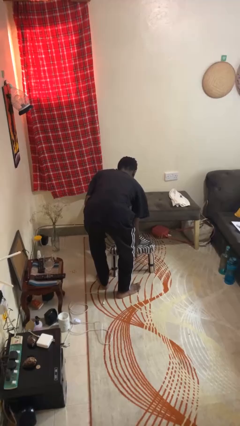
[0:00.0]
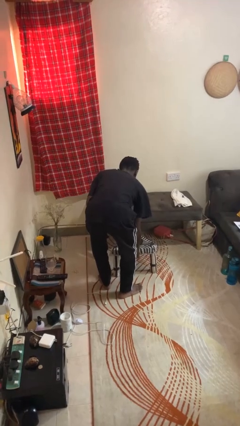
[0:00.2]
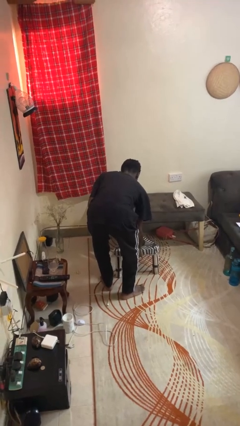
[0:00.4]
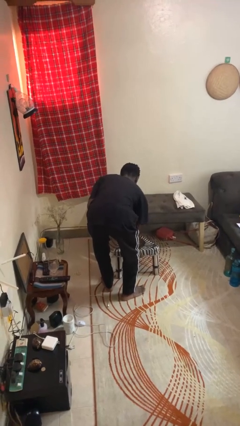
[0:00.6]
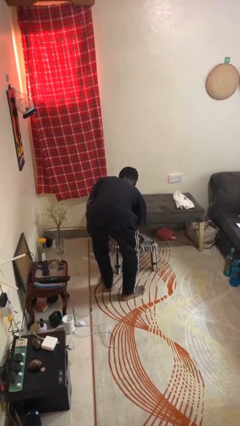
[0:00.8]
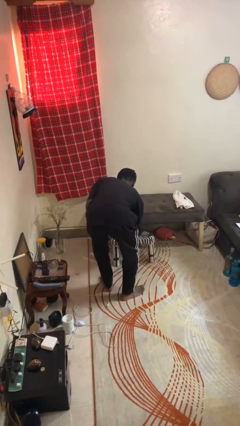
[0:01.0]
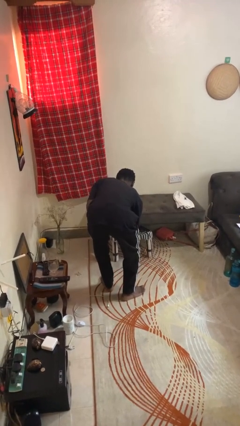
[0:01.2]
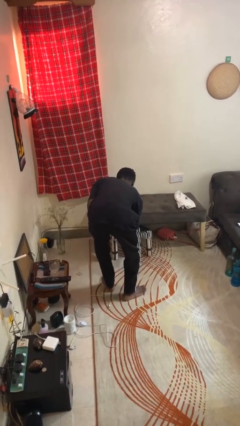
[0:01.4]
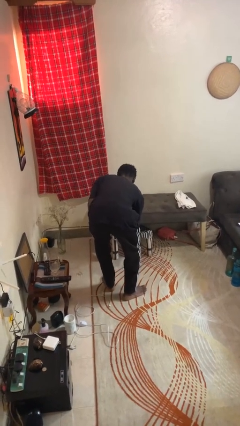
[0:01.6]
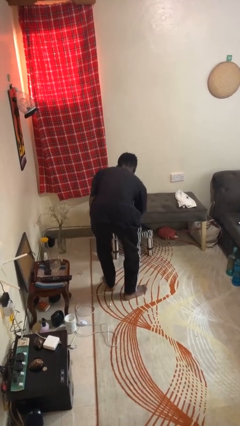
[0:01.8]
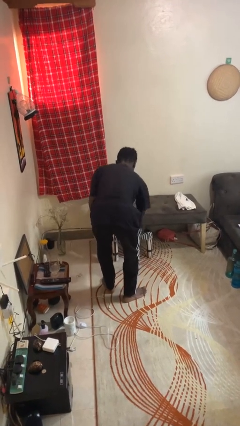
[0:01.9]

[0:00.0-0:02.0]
person pushes in chair

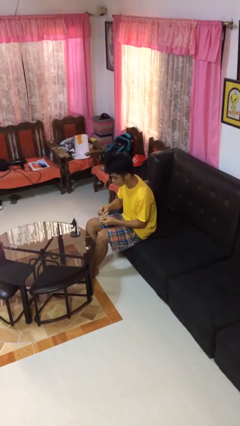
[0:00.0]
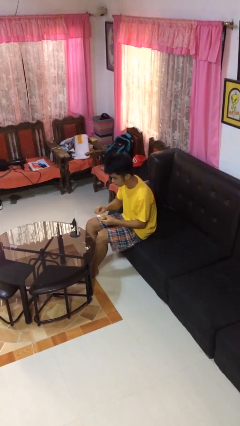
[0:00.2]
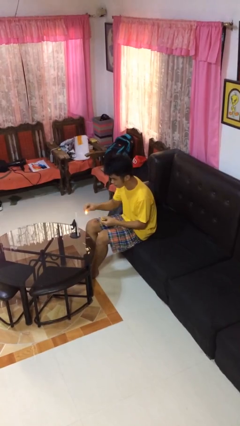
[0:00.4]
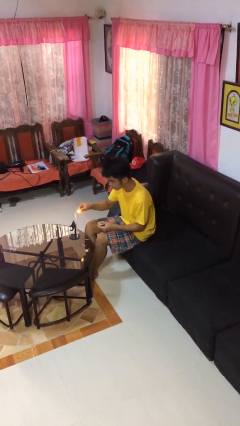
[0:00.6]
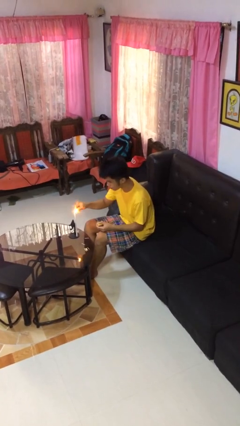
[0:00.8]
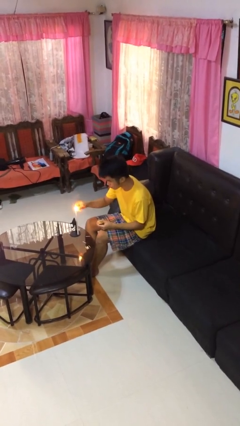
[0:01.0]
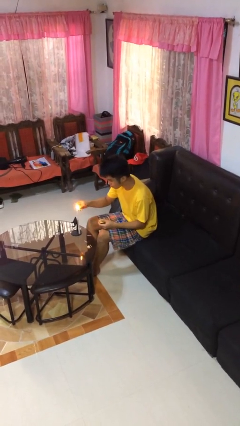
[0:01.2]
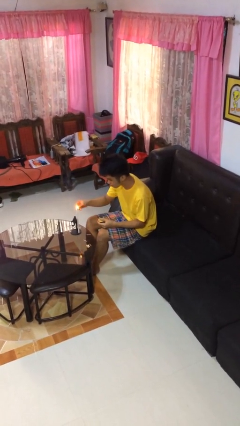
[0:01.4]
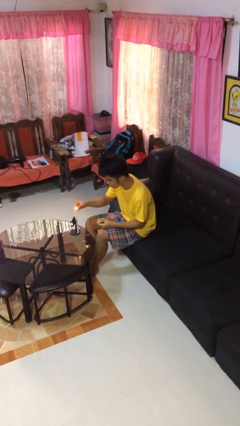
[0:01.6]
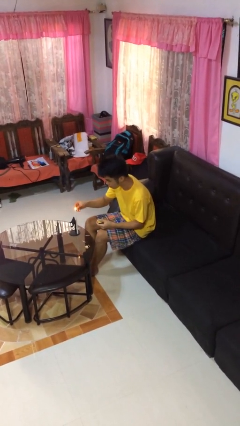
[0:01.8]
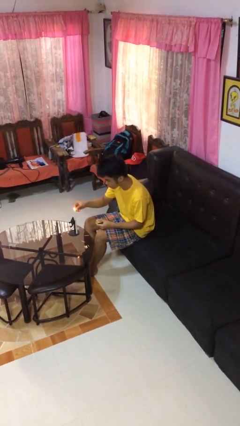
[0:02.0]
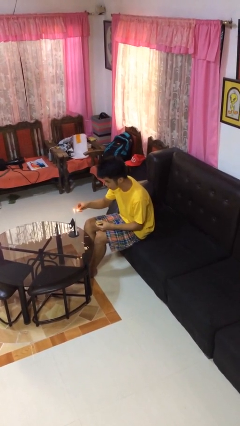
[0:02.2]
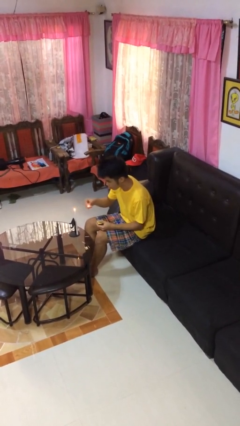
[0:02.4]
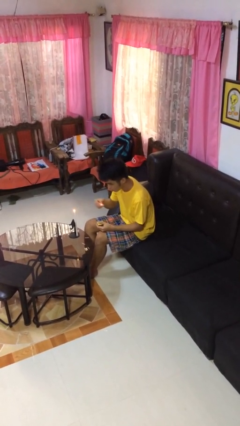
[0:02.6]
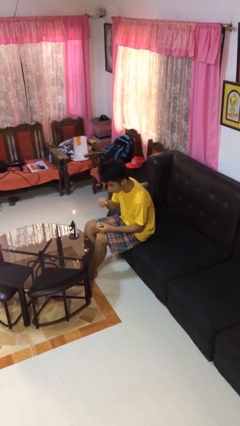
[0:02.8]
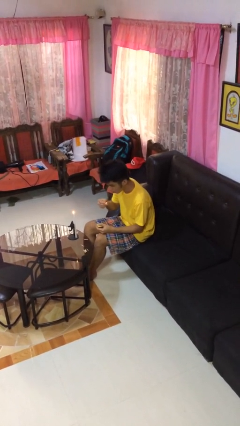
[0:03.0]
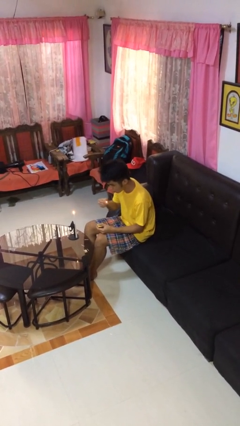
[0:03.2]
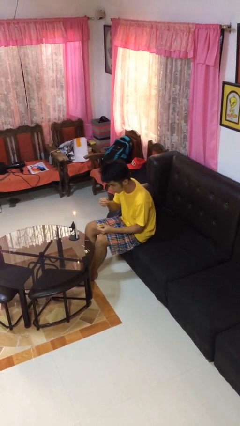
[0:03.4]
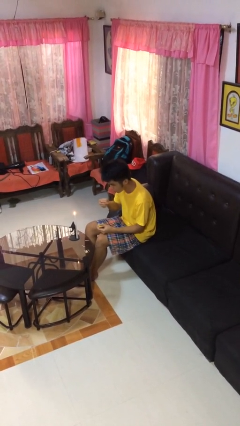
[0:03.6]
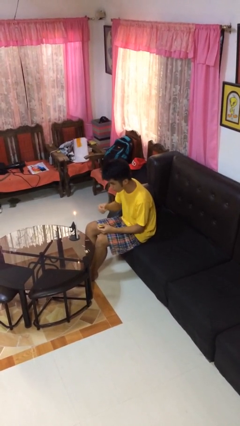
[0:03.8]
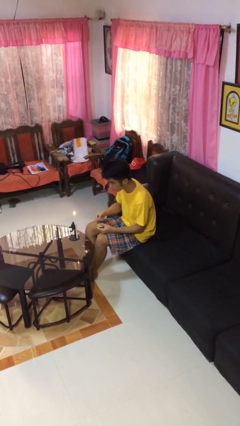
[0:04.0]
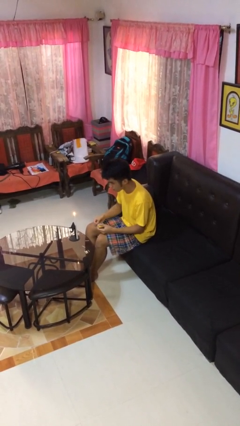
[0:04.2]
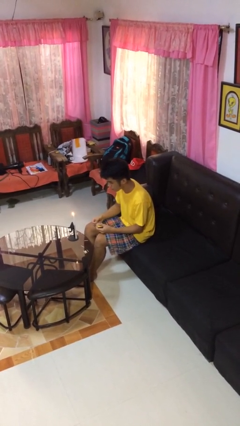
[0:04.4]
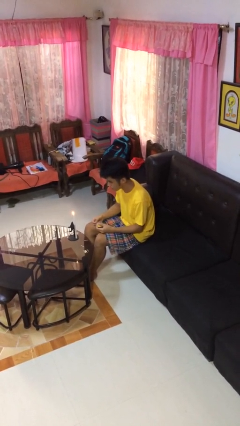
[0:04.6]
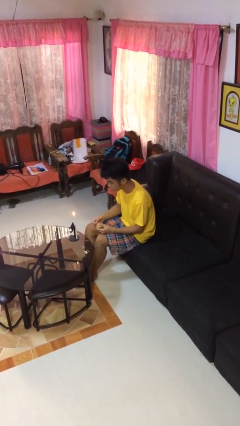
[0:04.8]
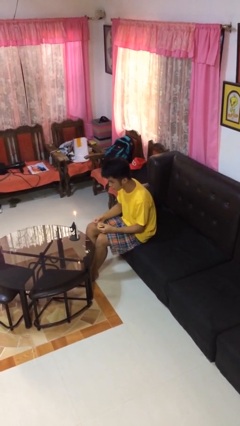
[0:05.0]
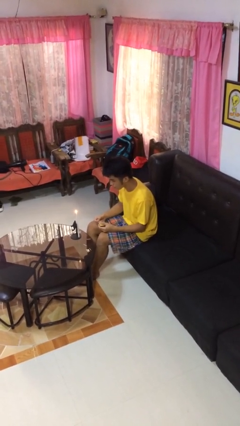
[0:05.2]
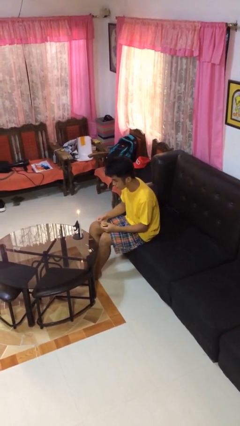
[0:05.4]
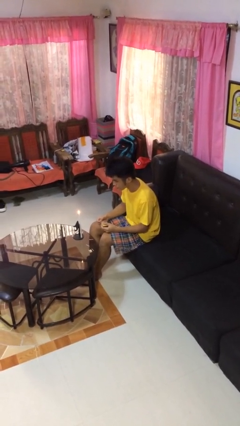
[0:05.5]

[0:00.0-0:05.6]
person lights candle

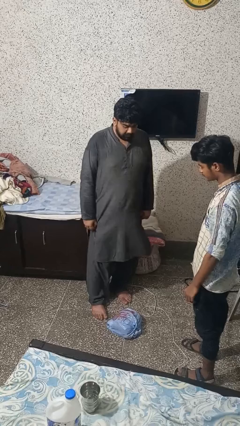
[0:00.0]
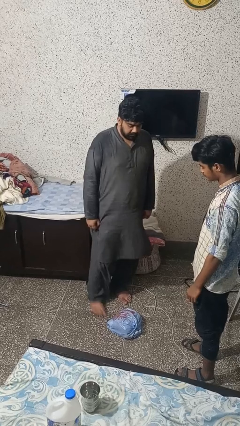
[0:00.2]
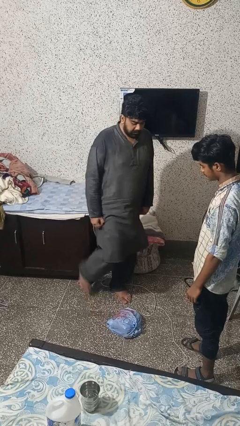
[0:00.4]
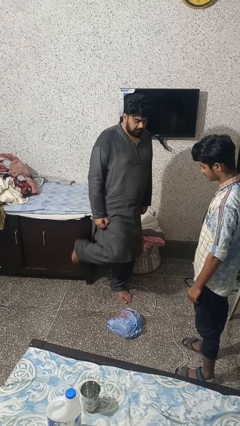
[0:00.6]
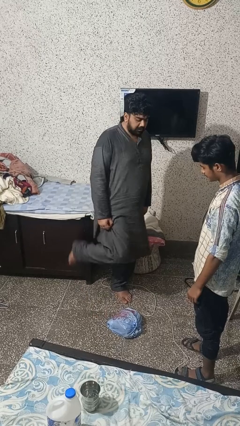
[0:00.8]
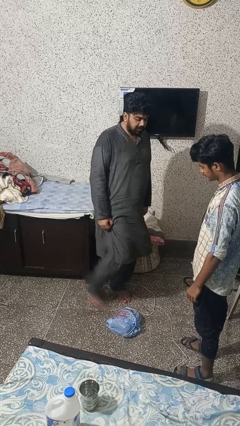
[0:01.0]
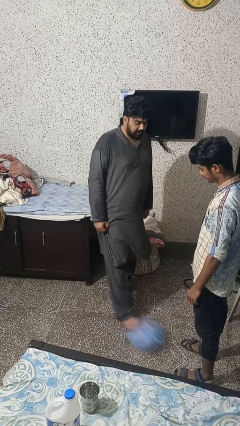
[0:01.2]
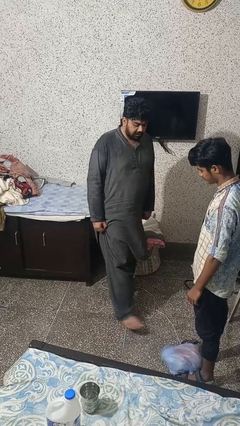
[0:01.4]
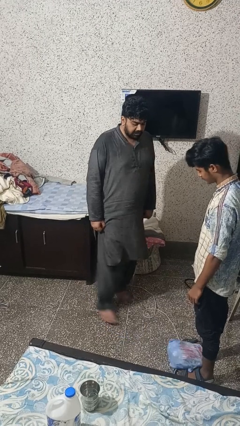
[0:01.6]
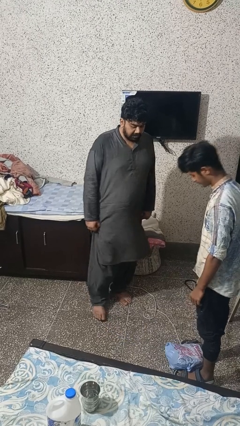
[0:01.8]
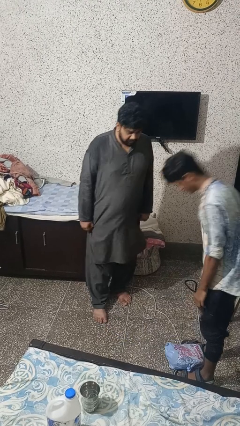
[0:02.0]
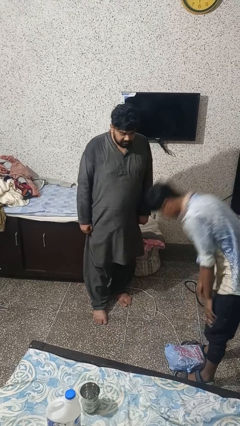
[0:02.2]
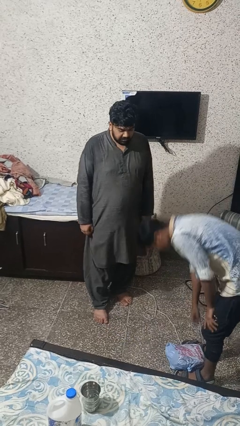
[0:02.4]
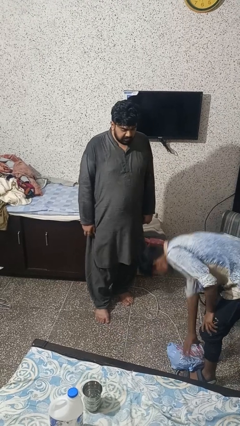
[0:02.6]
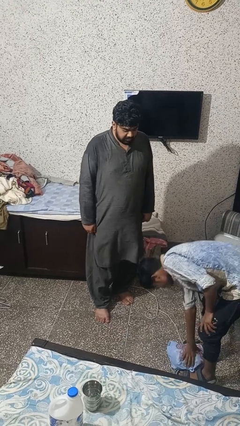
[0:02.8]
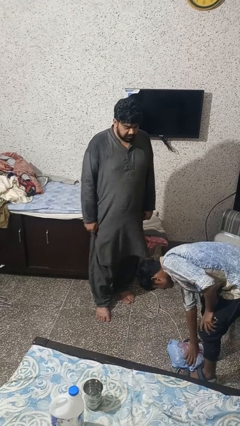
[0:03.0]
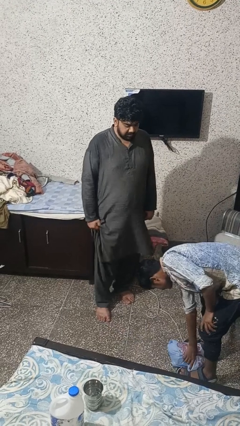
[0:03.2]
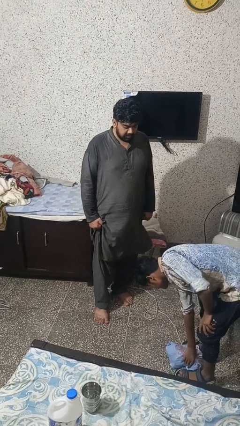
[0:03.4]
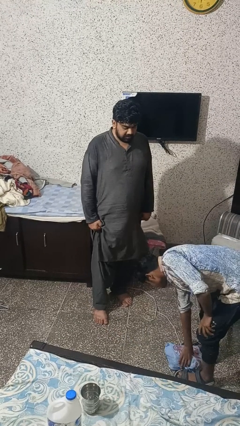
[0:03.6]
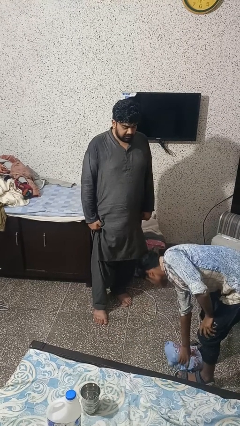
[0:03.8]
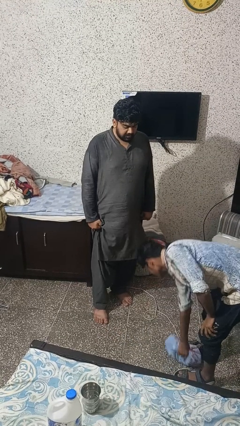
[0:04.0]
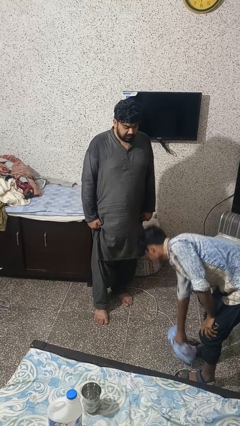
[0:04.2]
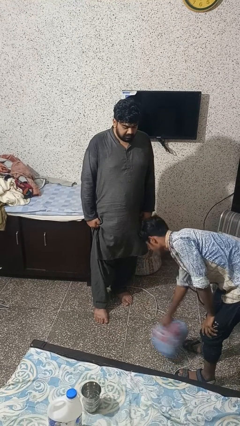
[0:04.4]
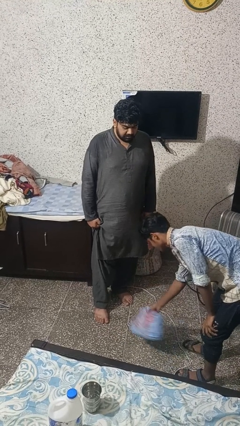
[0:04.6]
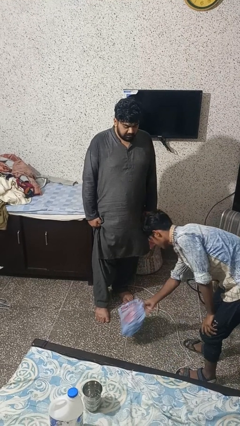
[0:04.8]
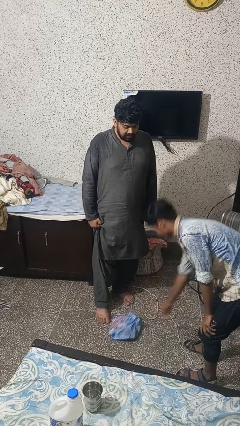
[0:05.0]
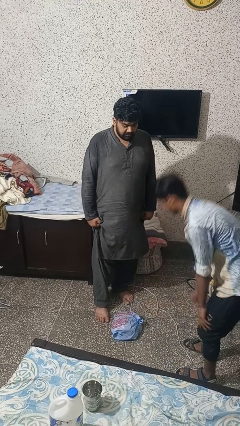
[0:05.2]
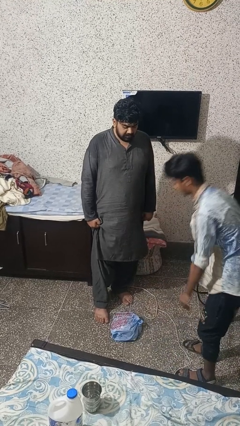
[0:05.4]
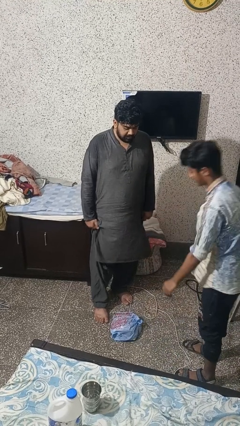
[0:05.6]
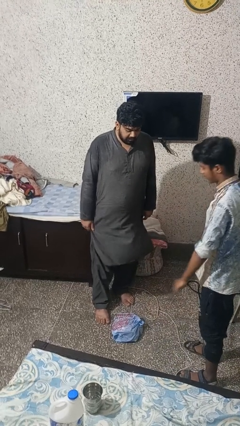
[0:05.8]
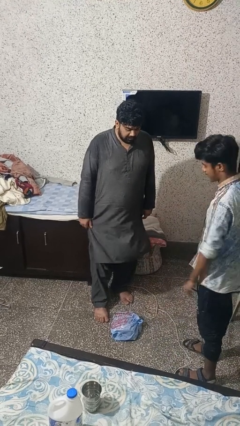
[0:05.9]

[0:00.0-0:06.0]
person kicks object to person

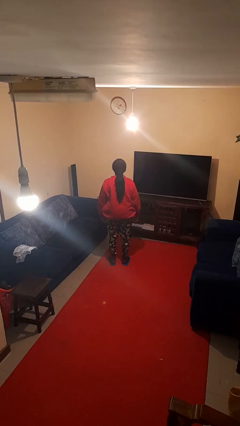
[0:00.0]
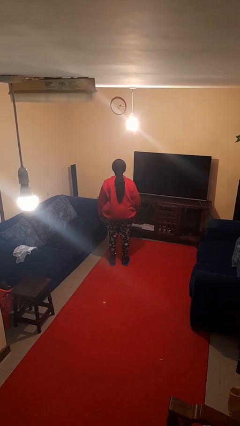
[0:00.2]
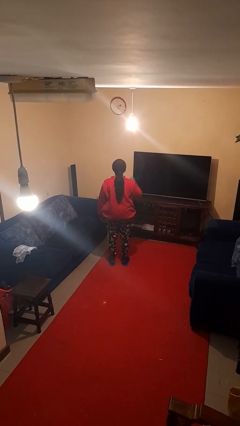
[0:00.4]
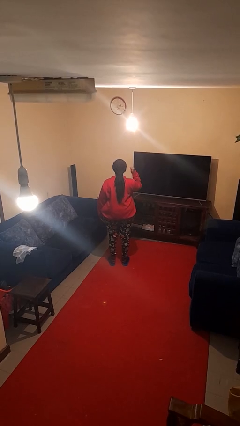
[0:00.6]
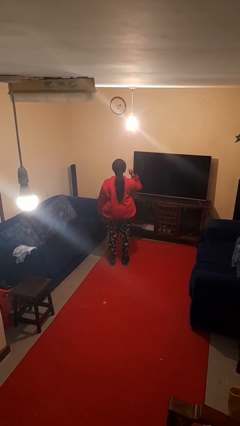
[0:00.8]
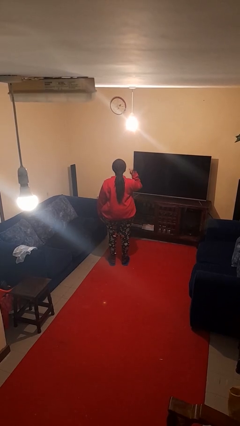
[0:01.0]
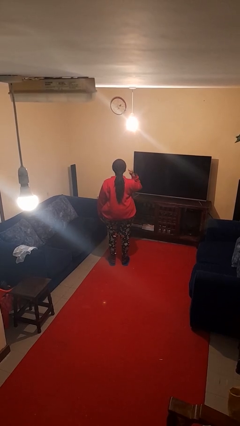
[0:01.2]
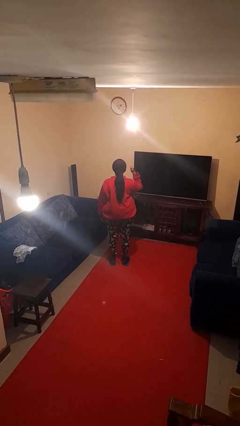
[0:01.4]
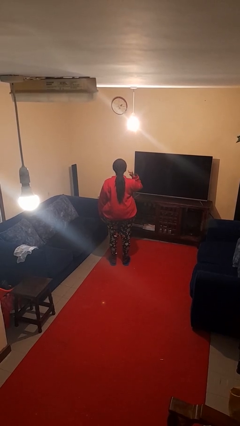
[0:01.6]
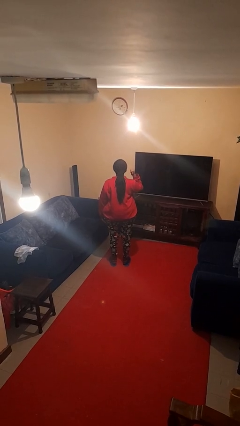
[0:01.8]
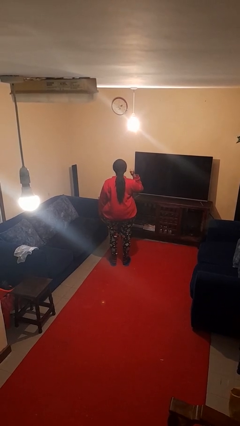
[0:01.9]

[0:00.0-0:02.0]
person gestures behind me

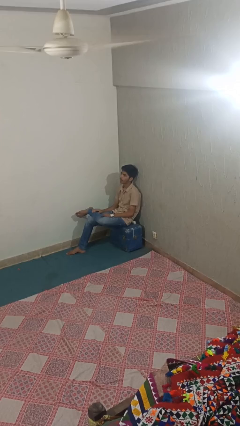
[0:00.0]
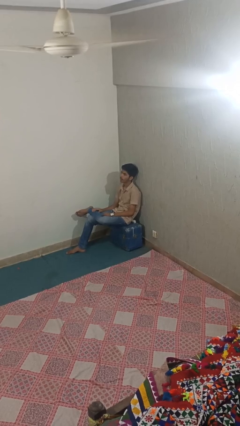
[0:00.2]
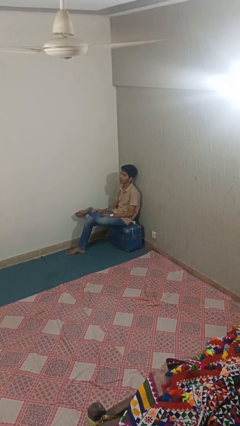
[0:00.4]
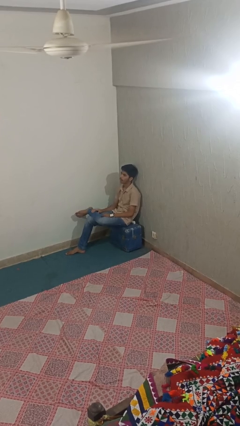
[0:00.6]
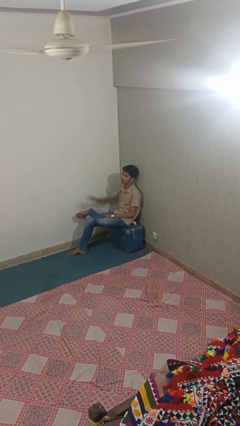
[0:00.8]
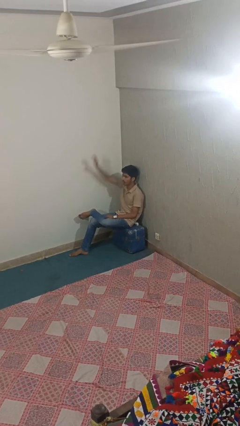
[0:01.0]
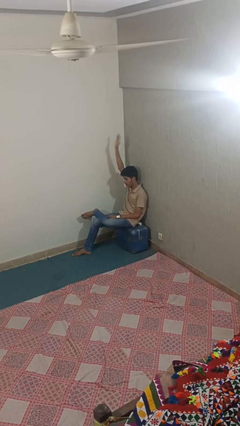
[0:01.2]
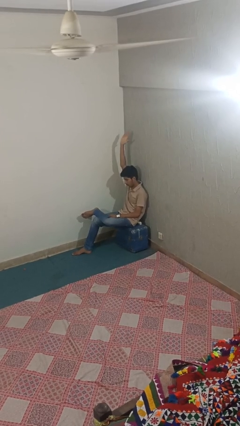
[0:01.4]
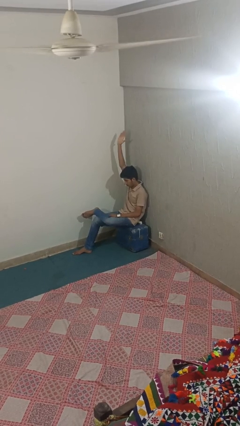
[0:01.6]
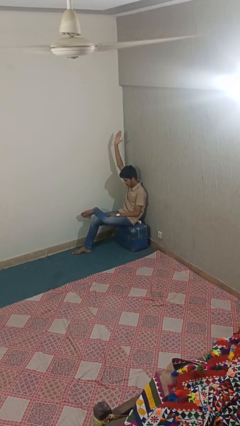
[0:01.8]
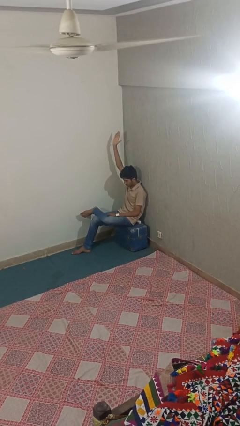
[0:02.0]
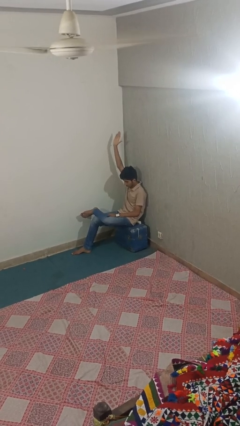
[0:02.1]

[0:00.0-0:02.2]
person gestures raise hand
